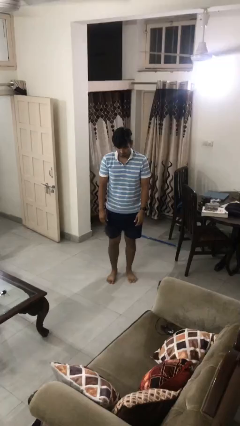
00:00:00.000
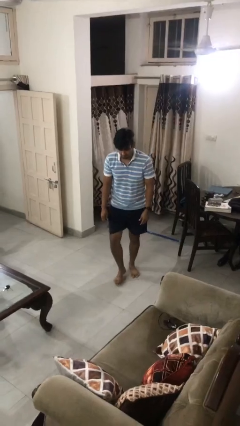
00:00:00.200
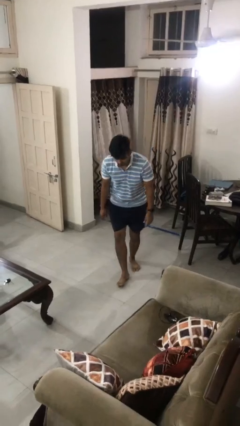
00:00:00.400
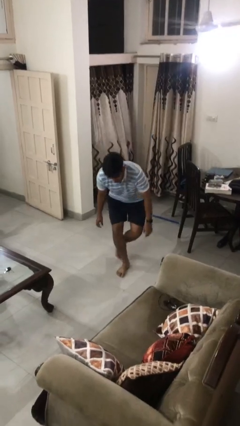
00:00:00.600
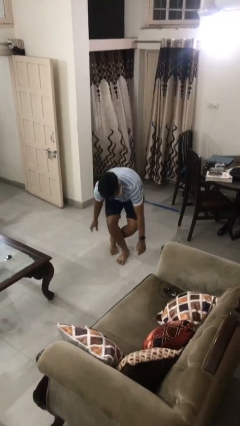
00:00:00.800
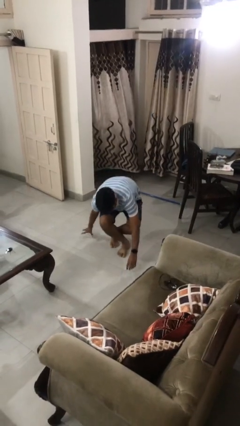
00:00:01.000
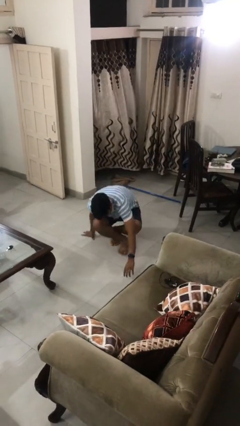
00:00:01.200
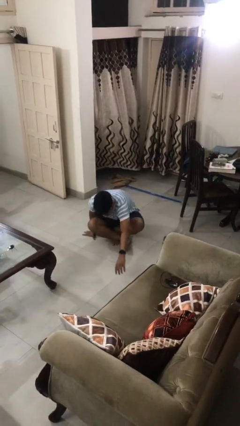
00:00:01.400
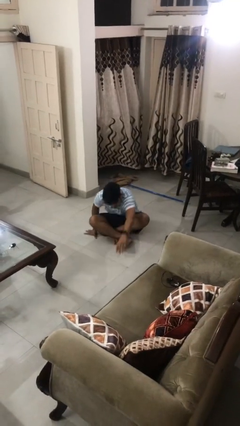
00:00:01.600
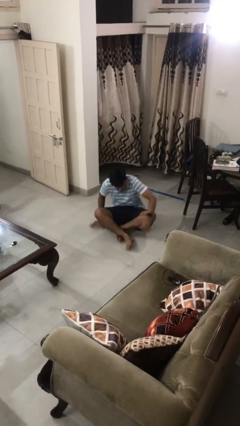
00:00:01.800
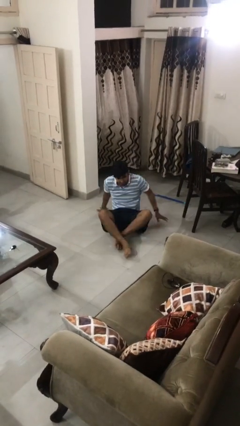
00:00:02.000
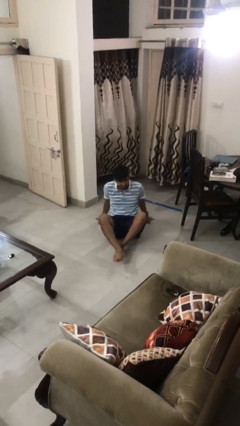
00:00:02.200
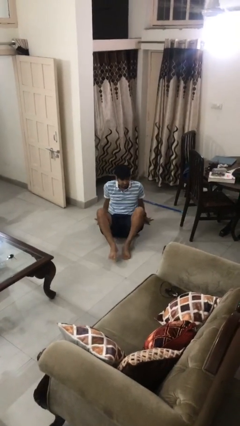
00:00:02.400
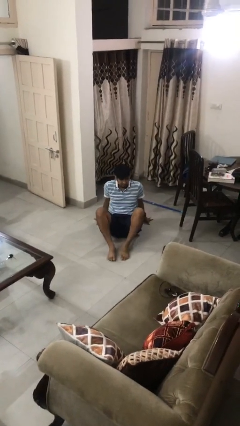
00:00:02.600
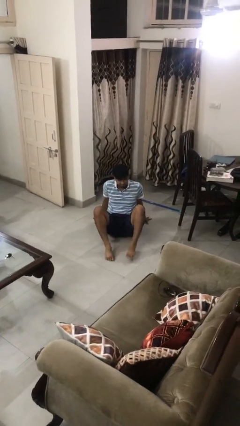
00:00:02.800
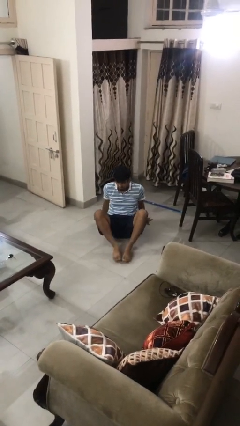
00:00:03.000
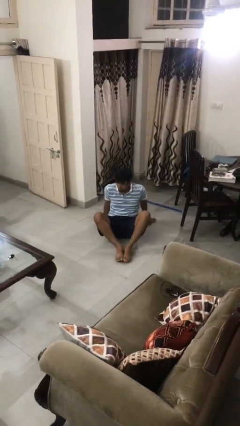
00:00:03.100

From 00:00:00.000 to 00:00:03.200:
person sits crisscross

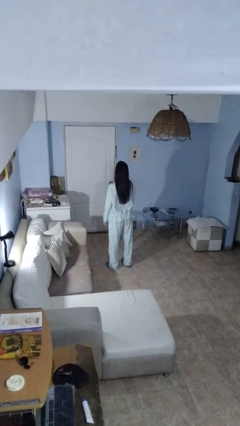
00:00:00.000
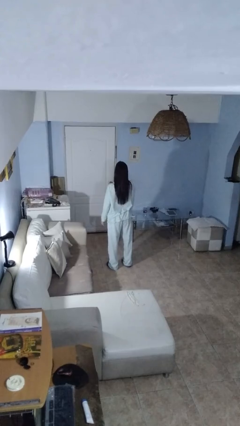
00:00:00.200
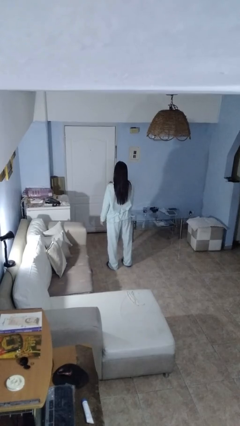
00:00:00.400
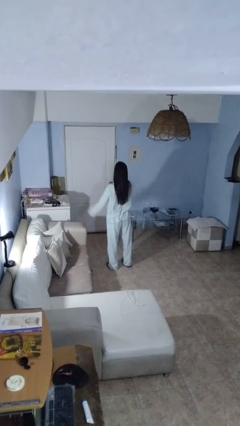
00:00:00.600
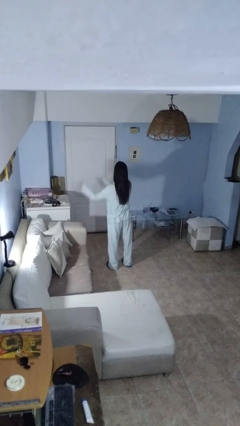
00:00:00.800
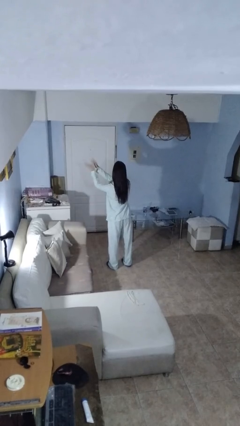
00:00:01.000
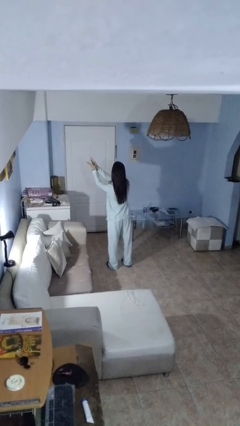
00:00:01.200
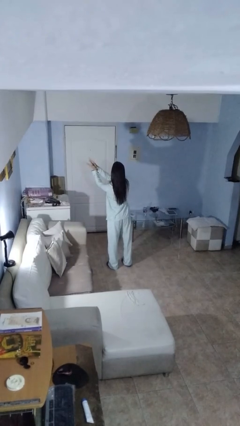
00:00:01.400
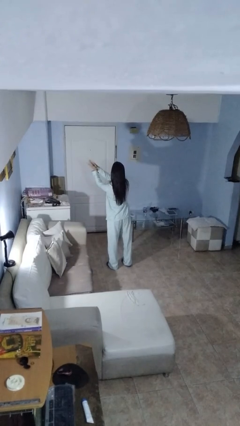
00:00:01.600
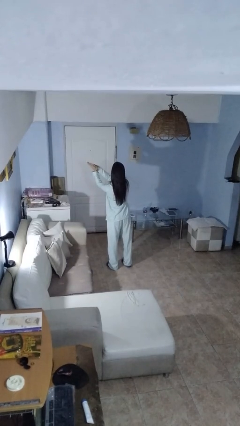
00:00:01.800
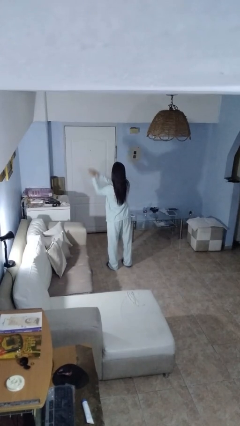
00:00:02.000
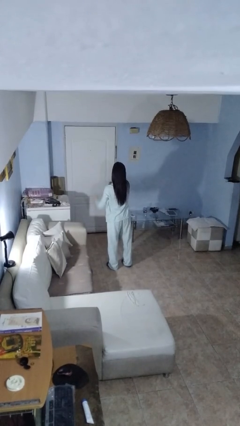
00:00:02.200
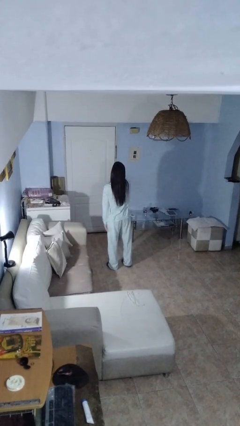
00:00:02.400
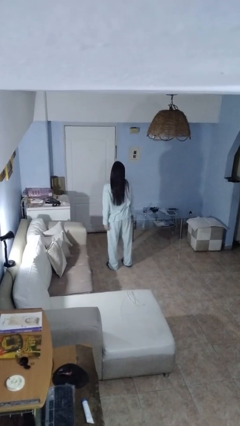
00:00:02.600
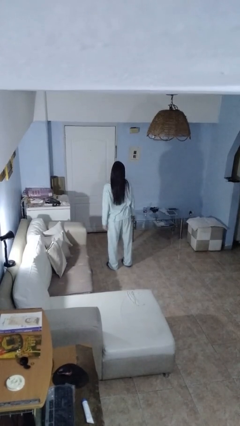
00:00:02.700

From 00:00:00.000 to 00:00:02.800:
person claps hands

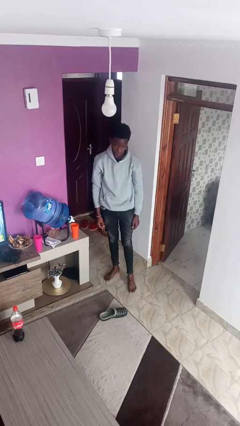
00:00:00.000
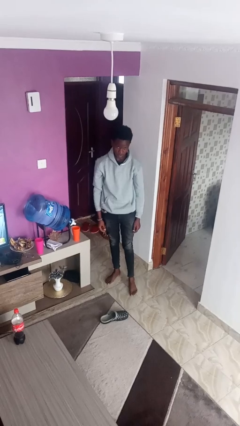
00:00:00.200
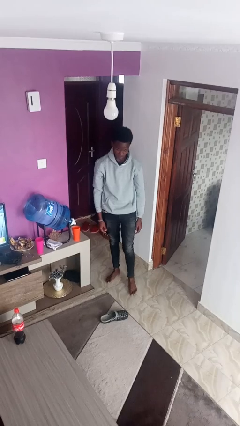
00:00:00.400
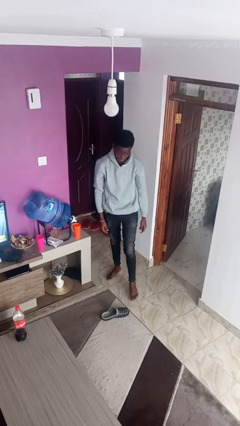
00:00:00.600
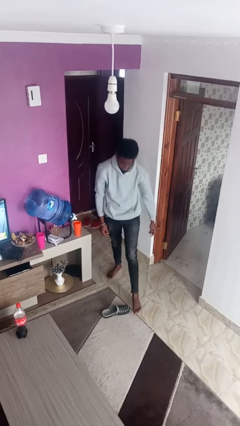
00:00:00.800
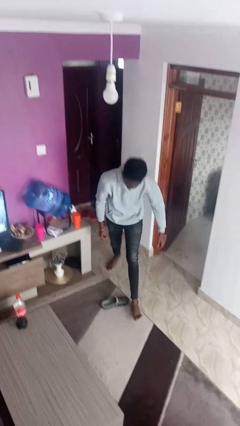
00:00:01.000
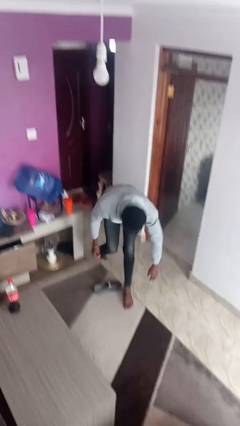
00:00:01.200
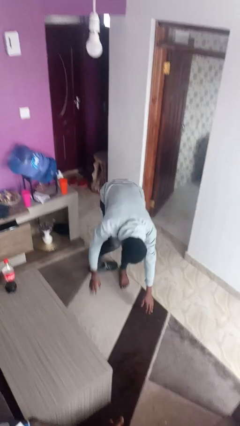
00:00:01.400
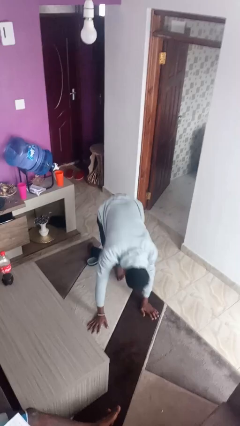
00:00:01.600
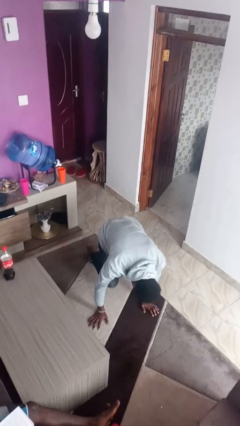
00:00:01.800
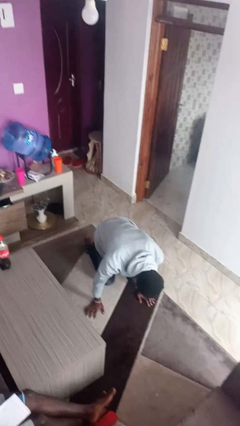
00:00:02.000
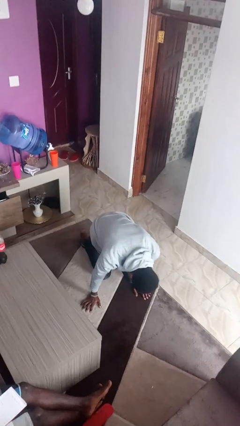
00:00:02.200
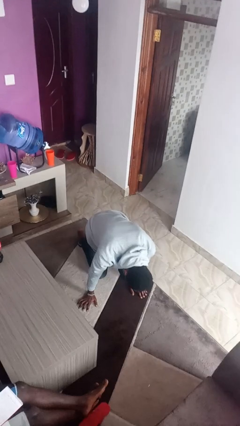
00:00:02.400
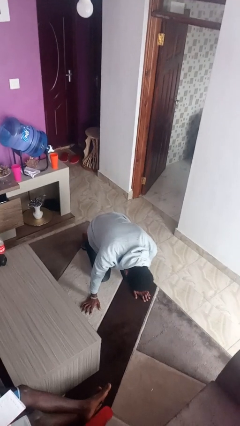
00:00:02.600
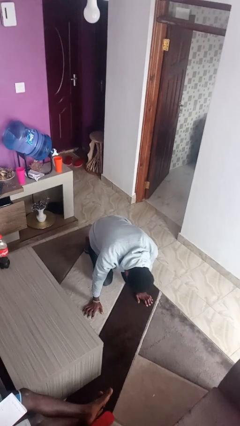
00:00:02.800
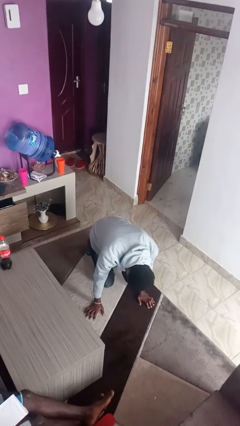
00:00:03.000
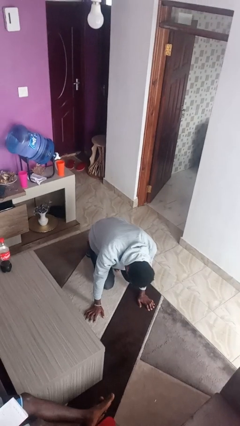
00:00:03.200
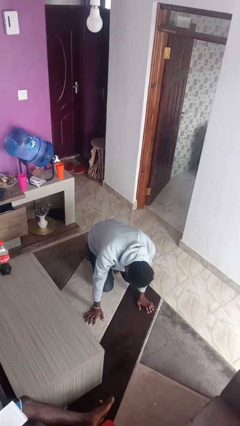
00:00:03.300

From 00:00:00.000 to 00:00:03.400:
person trips on object on floor

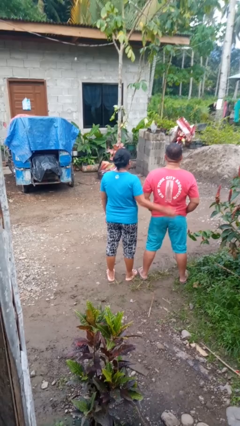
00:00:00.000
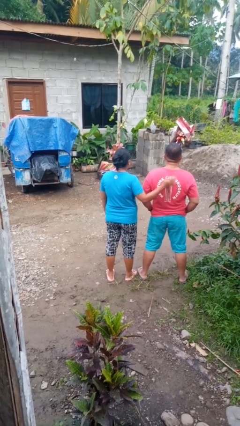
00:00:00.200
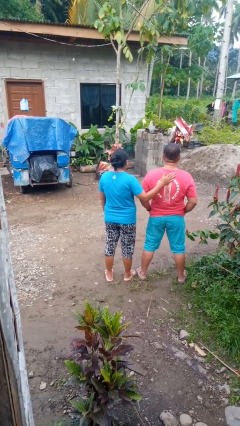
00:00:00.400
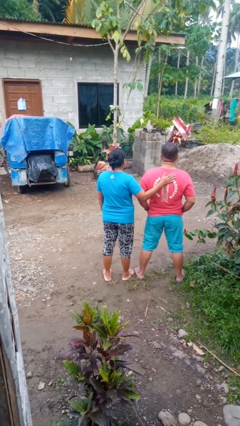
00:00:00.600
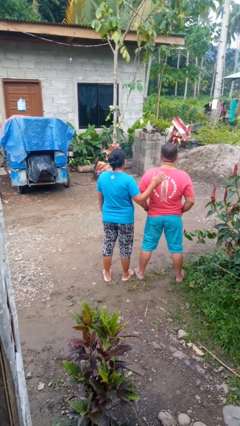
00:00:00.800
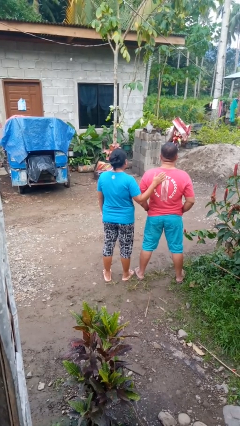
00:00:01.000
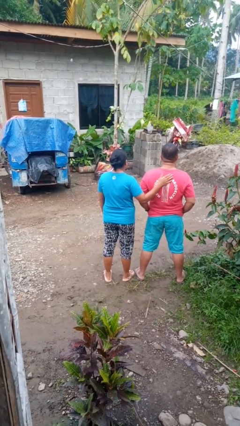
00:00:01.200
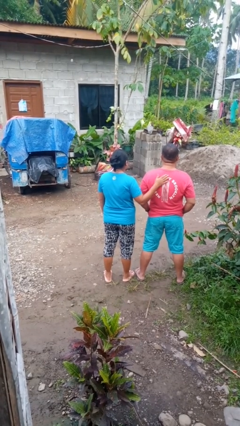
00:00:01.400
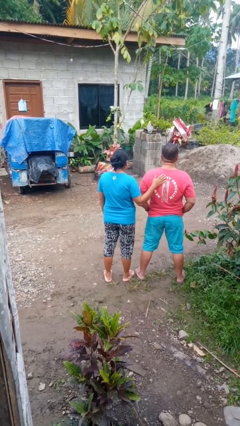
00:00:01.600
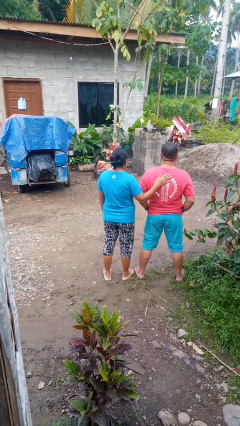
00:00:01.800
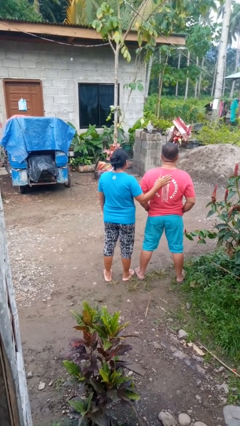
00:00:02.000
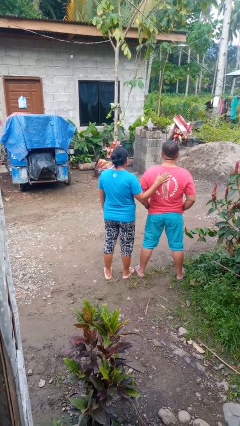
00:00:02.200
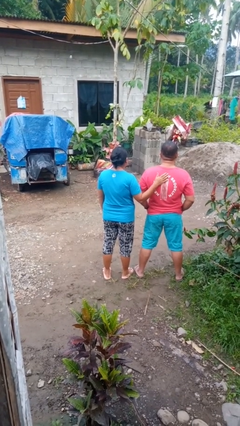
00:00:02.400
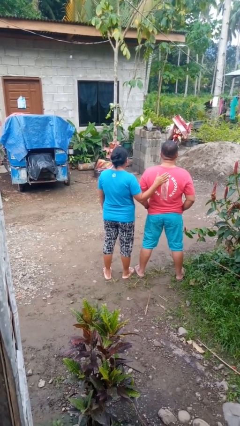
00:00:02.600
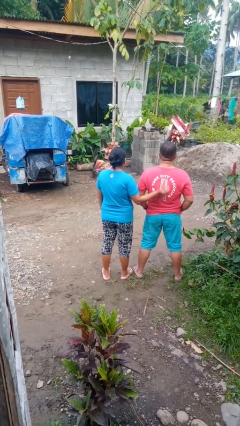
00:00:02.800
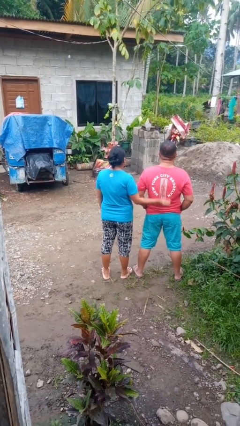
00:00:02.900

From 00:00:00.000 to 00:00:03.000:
person touches back of person

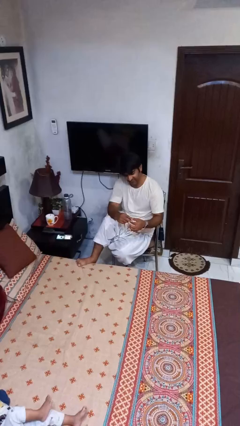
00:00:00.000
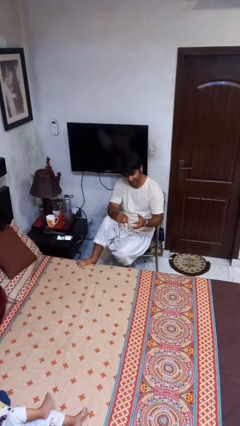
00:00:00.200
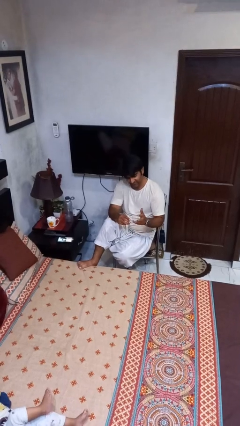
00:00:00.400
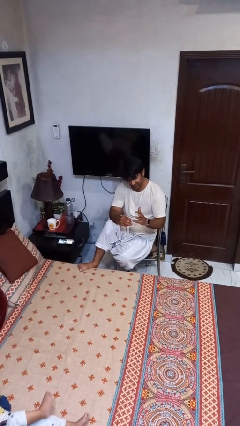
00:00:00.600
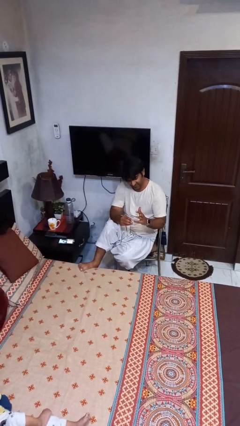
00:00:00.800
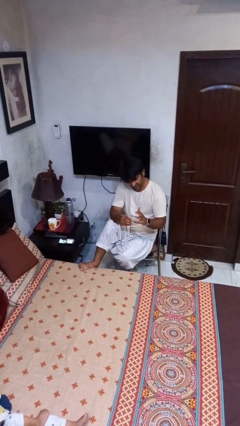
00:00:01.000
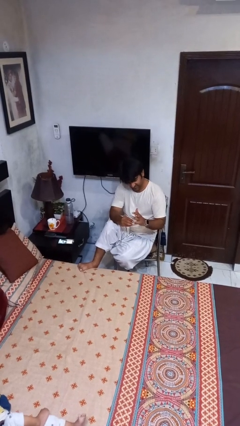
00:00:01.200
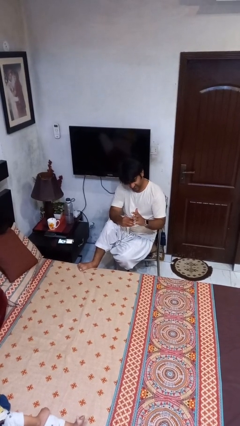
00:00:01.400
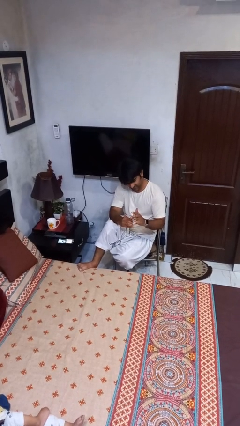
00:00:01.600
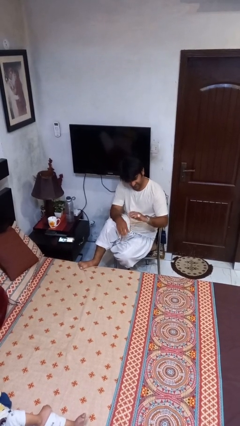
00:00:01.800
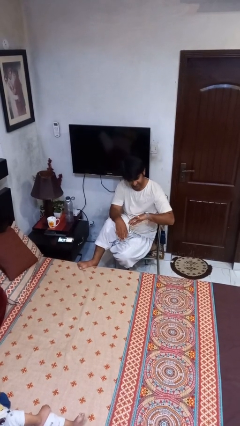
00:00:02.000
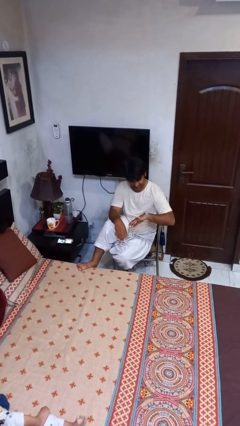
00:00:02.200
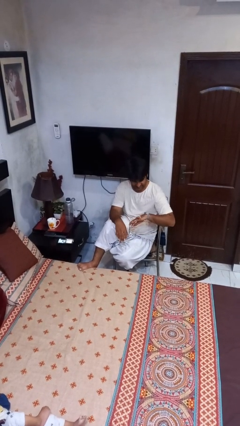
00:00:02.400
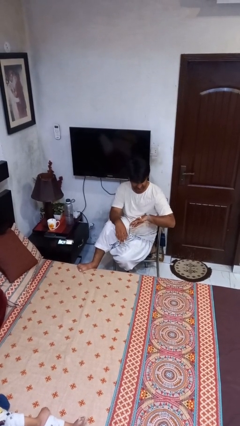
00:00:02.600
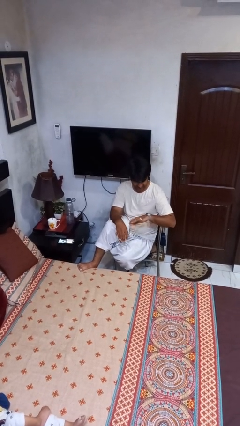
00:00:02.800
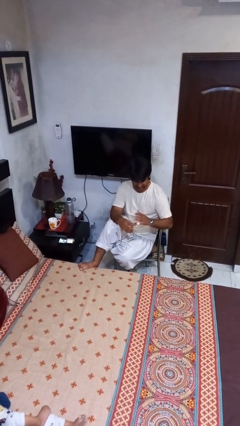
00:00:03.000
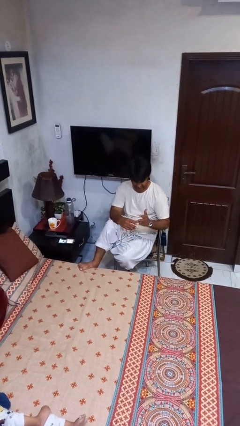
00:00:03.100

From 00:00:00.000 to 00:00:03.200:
person puts on ring

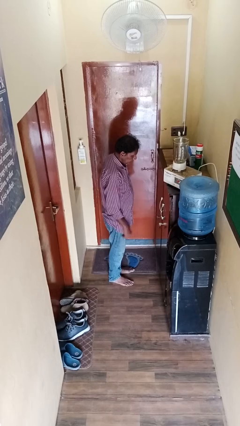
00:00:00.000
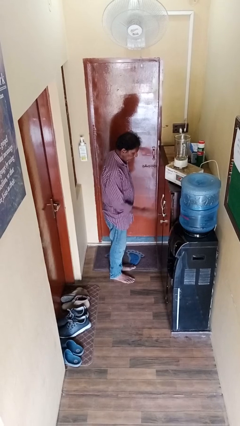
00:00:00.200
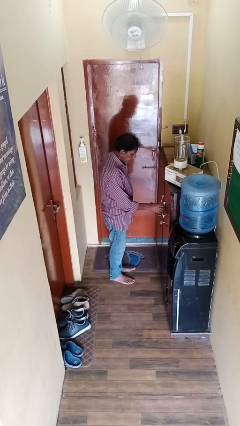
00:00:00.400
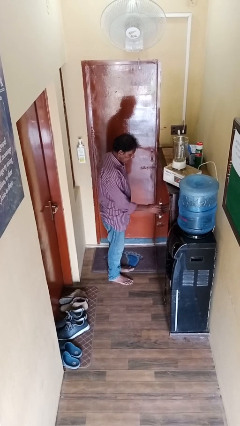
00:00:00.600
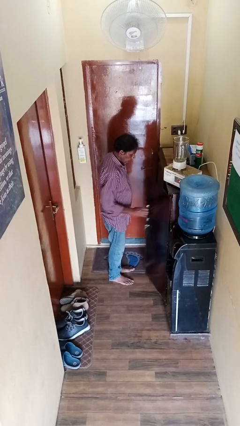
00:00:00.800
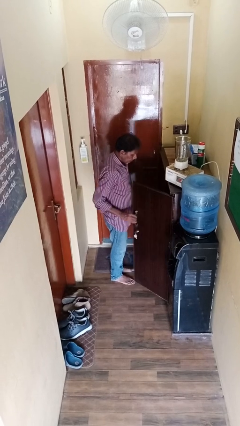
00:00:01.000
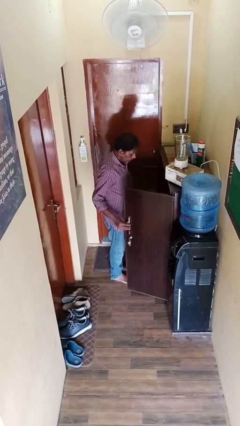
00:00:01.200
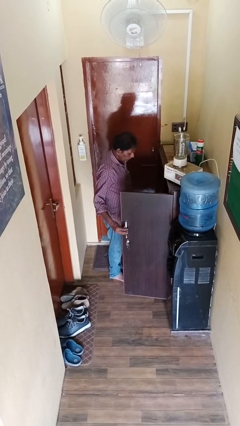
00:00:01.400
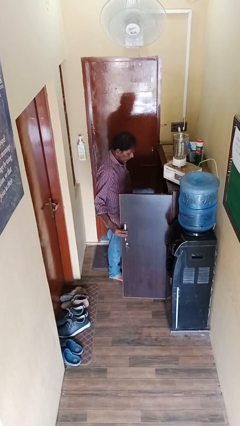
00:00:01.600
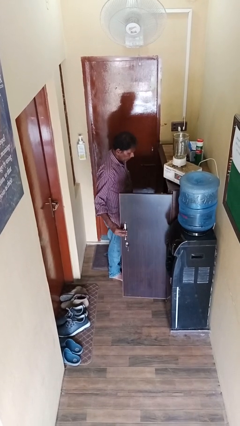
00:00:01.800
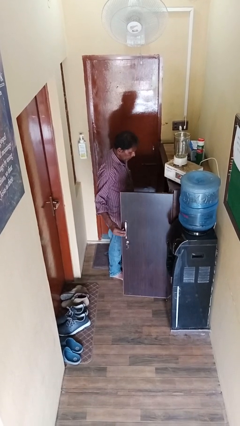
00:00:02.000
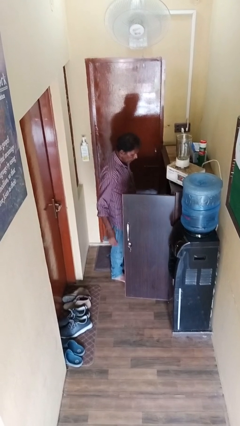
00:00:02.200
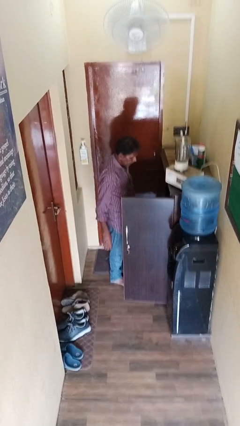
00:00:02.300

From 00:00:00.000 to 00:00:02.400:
person opens cabinet
